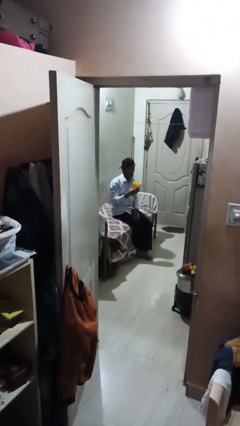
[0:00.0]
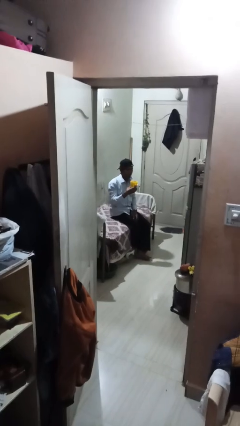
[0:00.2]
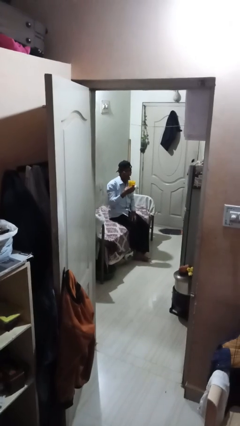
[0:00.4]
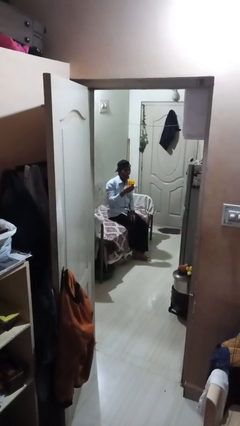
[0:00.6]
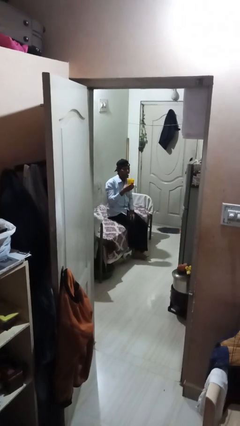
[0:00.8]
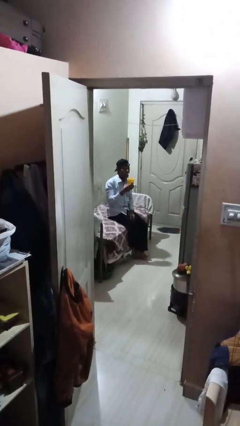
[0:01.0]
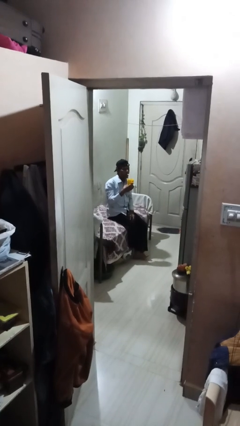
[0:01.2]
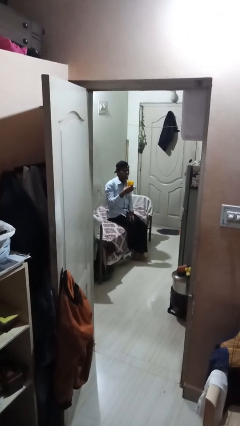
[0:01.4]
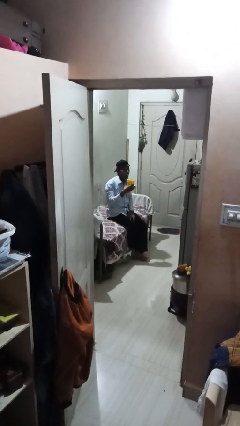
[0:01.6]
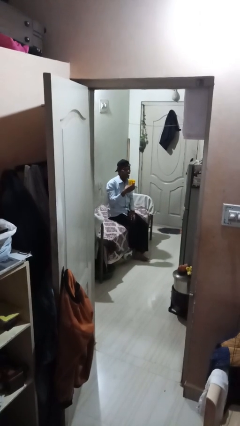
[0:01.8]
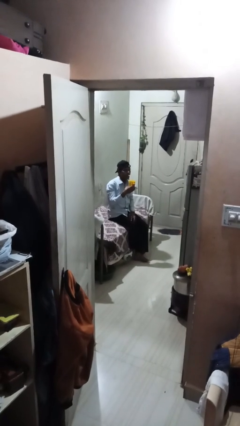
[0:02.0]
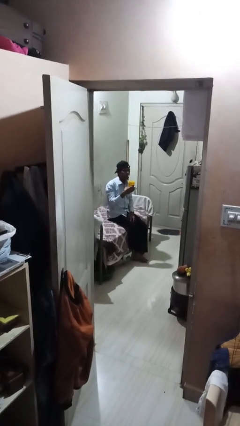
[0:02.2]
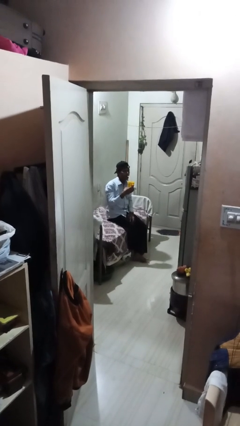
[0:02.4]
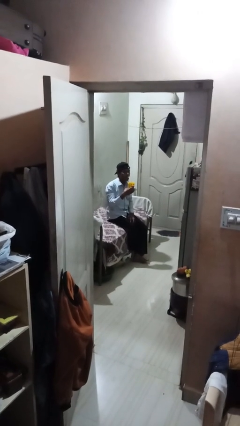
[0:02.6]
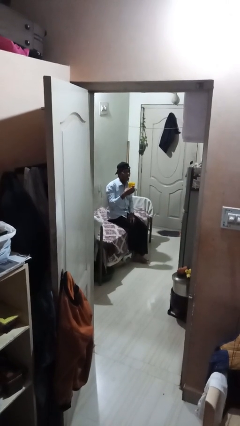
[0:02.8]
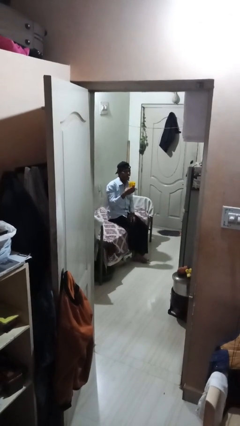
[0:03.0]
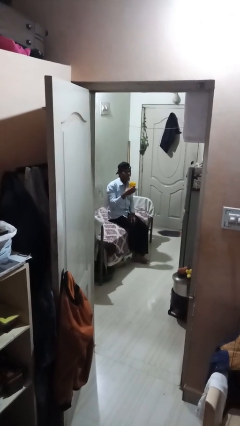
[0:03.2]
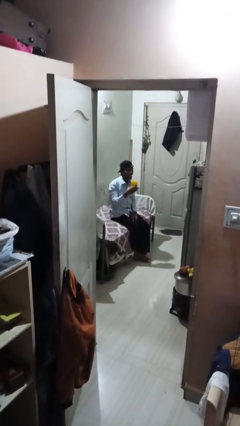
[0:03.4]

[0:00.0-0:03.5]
person drinks from straw

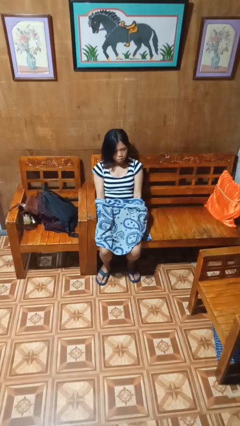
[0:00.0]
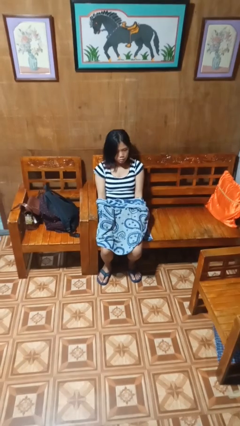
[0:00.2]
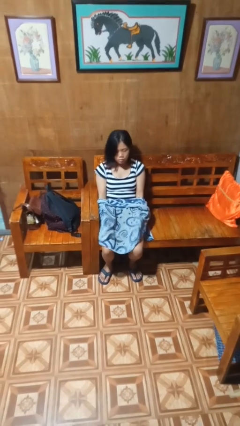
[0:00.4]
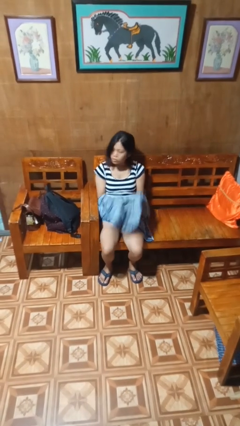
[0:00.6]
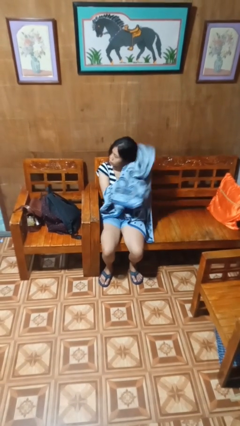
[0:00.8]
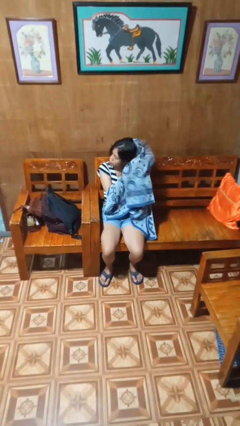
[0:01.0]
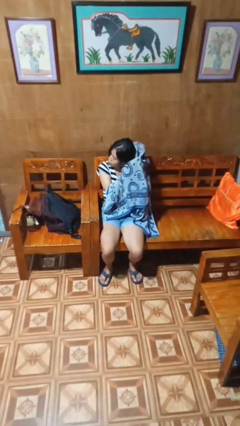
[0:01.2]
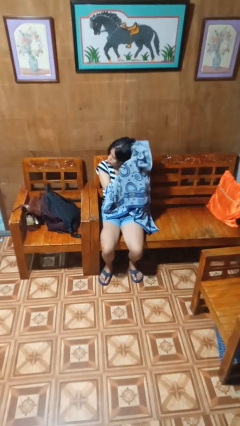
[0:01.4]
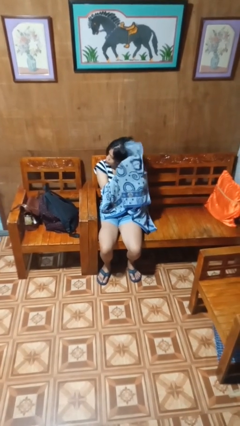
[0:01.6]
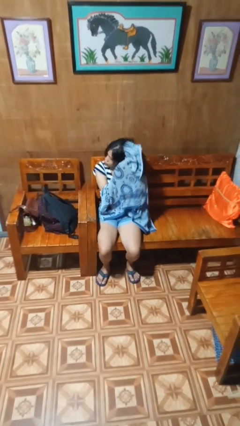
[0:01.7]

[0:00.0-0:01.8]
person dries hair with towel

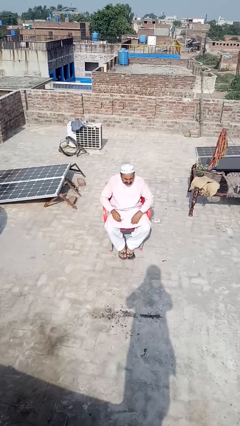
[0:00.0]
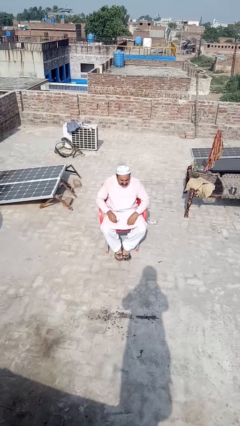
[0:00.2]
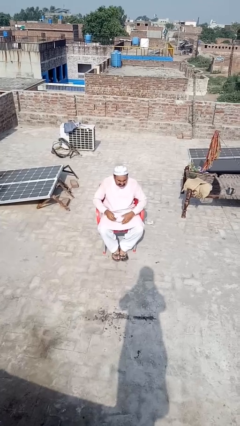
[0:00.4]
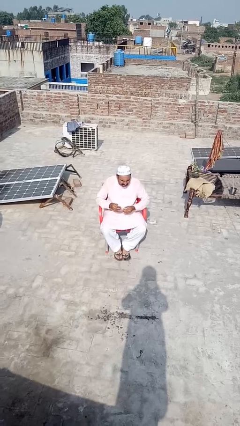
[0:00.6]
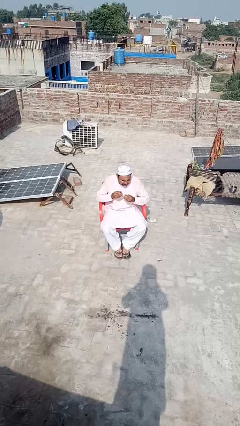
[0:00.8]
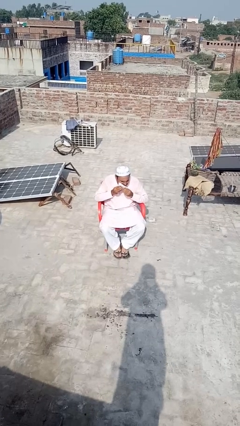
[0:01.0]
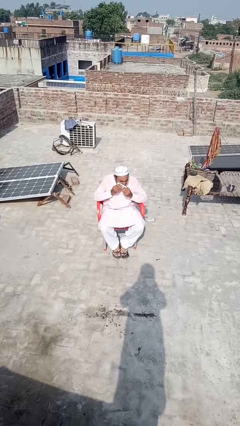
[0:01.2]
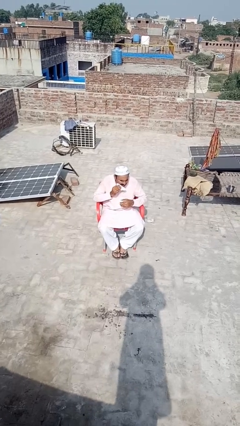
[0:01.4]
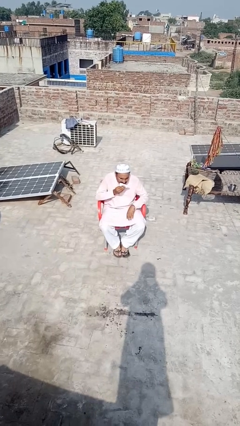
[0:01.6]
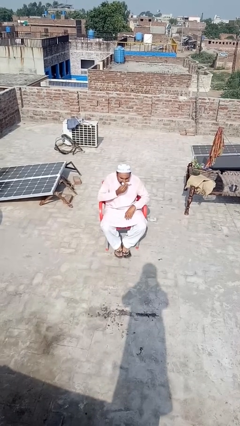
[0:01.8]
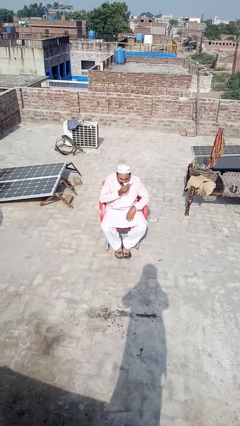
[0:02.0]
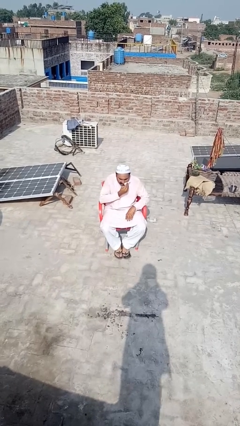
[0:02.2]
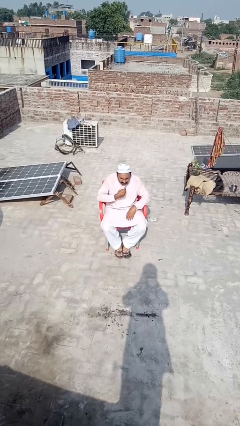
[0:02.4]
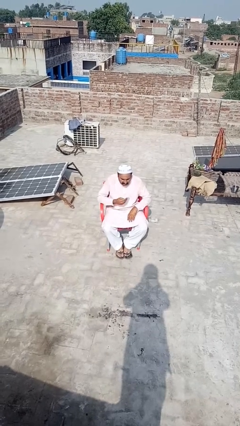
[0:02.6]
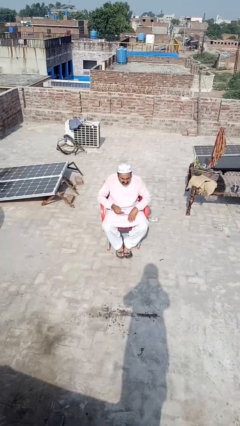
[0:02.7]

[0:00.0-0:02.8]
person wipes mouth with napkin

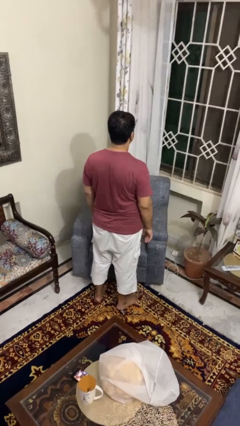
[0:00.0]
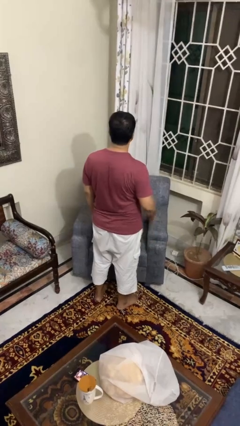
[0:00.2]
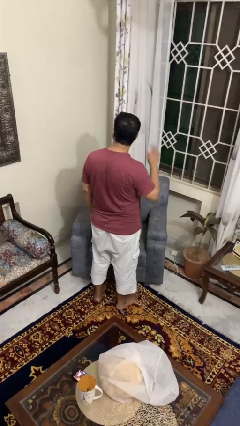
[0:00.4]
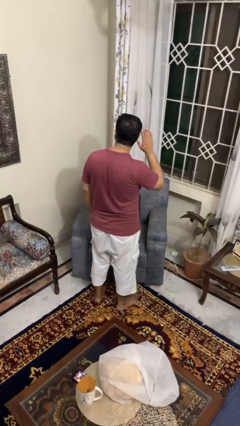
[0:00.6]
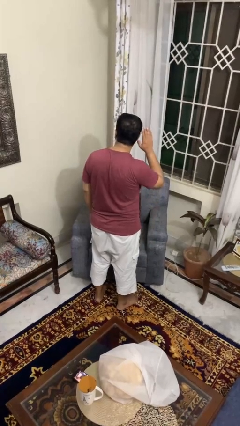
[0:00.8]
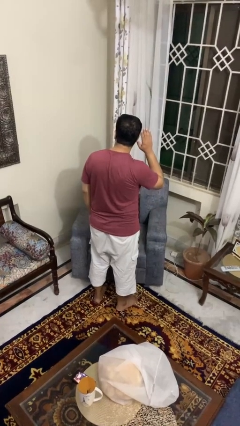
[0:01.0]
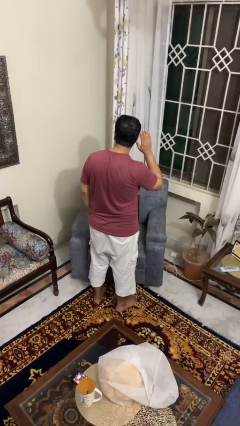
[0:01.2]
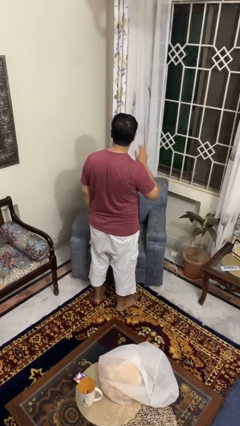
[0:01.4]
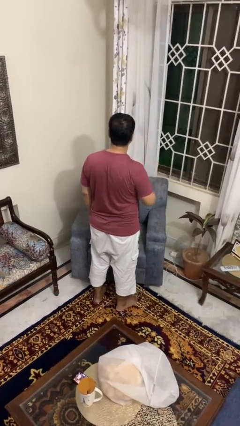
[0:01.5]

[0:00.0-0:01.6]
person gestures listen closely

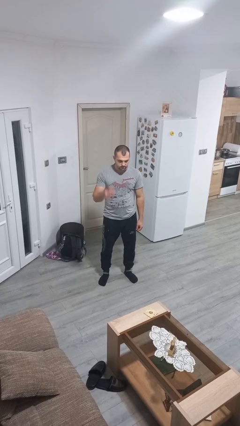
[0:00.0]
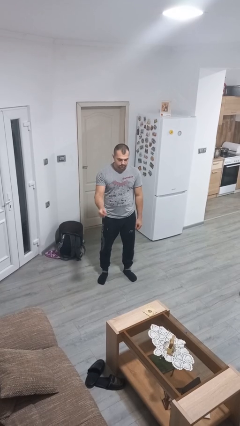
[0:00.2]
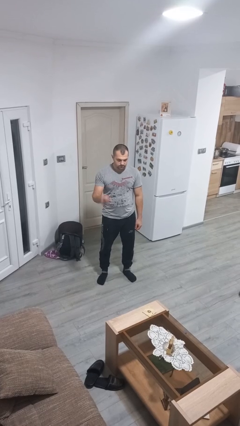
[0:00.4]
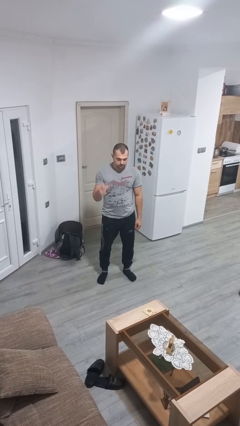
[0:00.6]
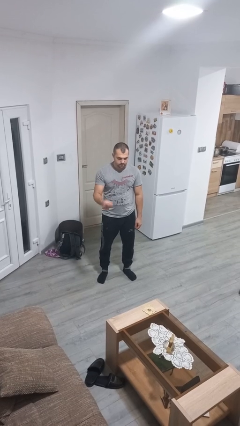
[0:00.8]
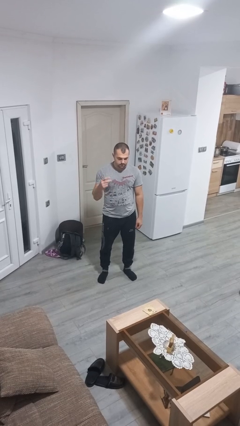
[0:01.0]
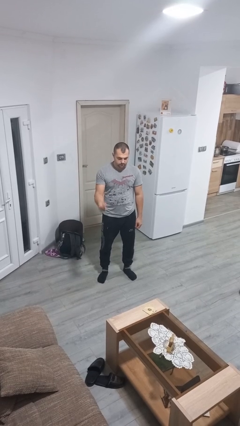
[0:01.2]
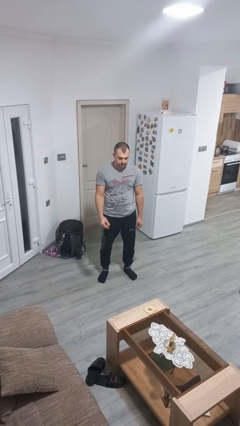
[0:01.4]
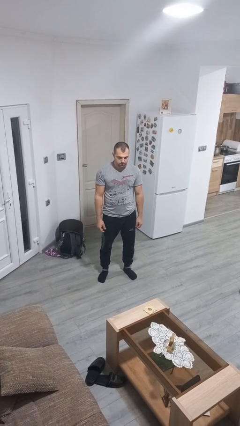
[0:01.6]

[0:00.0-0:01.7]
person snaps fingers

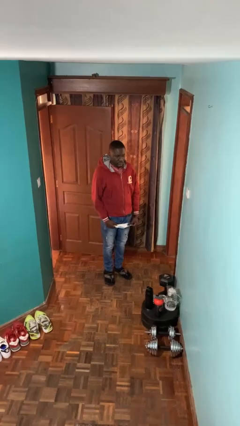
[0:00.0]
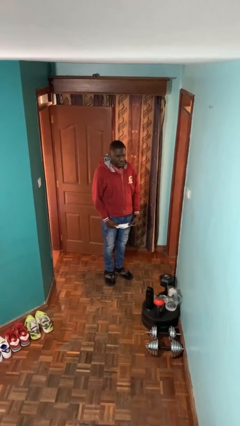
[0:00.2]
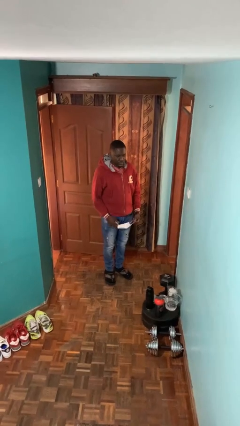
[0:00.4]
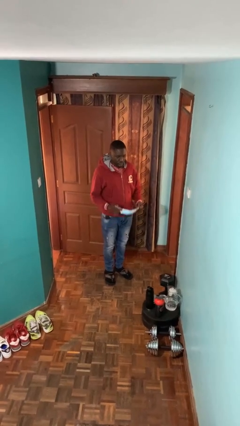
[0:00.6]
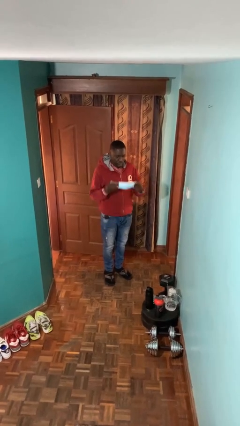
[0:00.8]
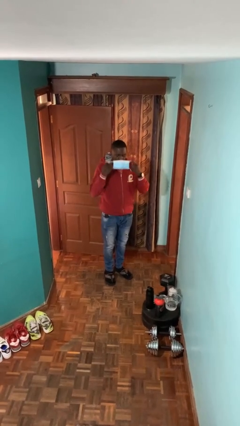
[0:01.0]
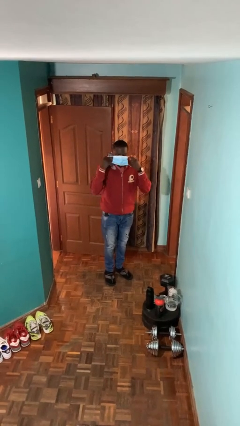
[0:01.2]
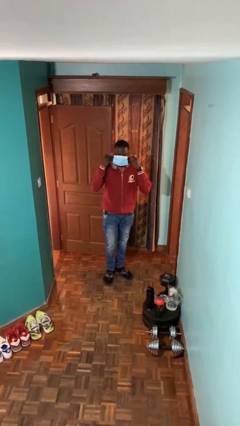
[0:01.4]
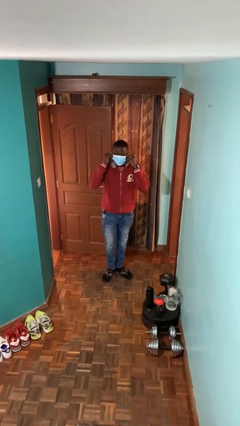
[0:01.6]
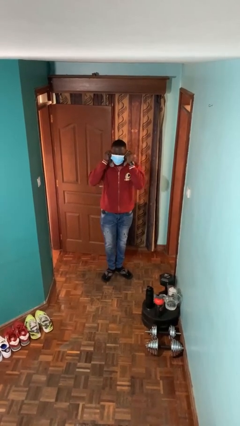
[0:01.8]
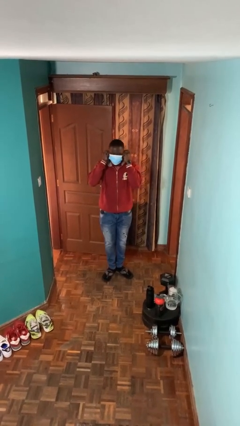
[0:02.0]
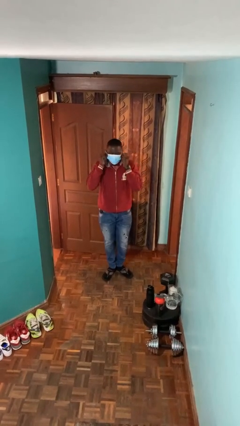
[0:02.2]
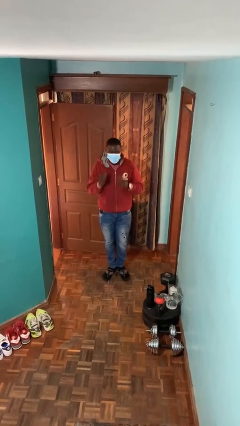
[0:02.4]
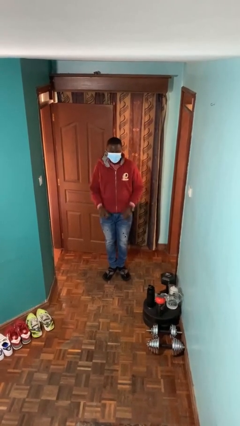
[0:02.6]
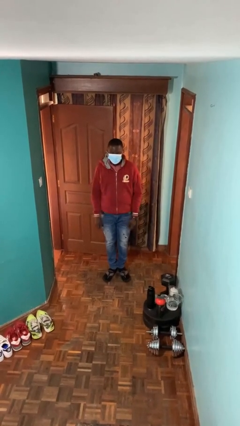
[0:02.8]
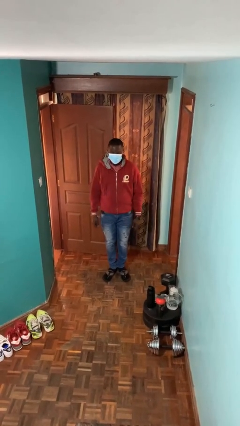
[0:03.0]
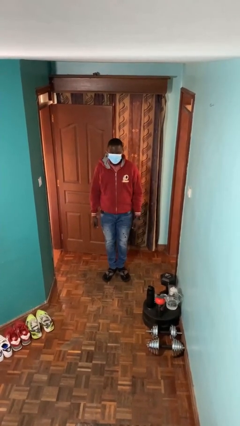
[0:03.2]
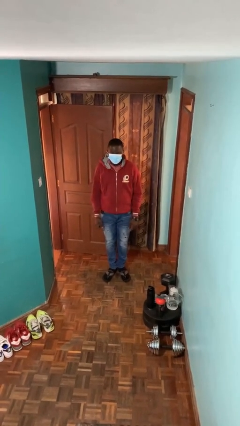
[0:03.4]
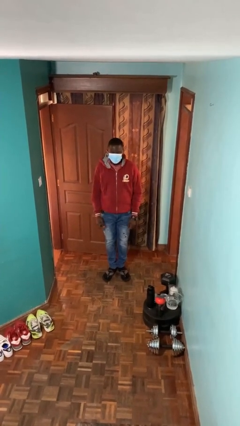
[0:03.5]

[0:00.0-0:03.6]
person puts on facemask

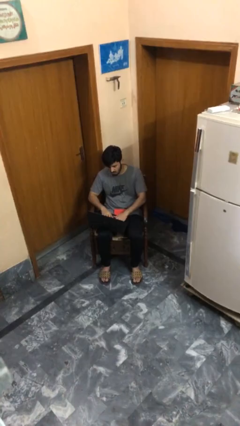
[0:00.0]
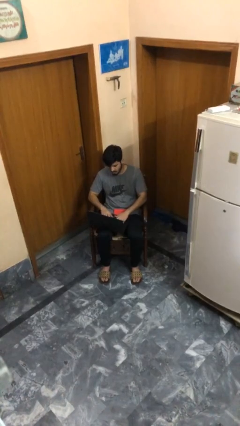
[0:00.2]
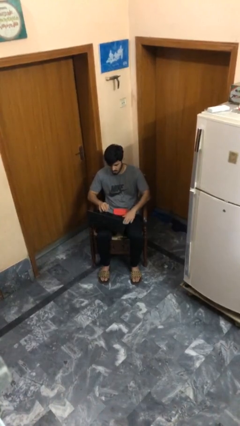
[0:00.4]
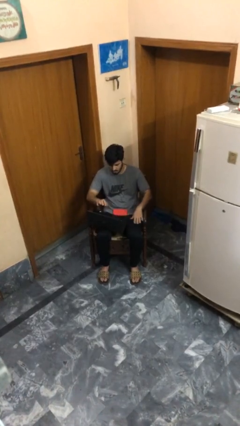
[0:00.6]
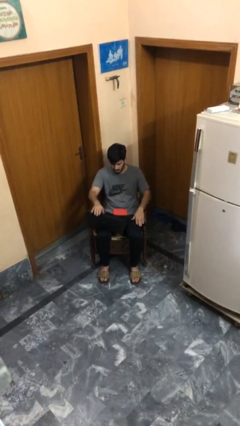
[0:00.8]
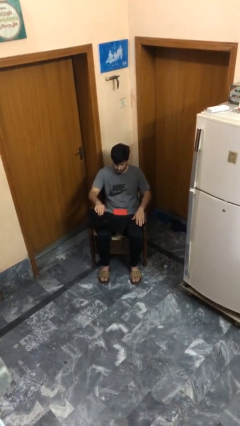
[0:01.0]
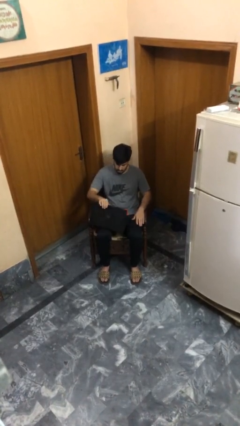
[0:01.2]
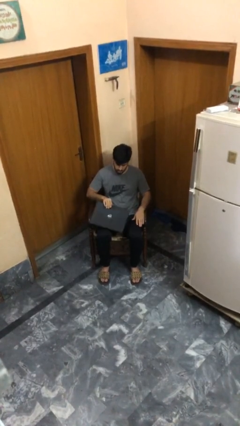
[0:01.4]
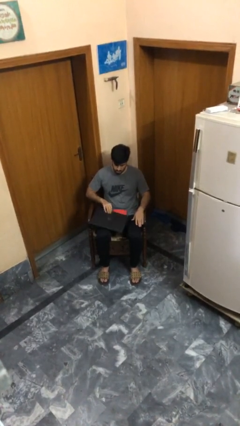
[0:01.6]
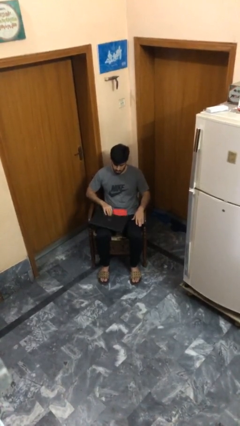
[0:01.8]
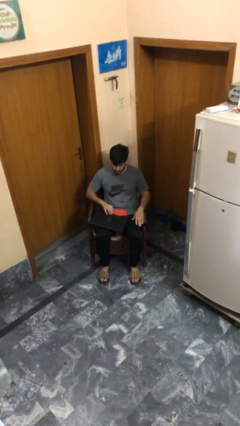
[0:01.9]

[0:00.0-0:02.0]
person closes laptop

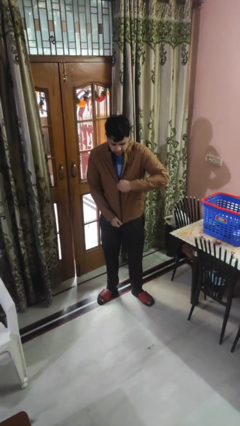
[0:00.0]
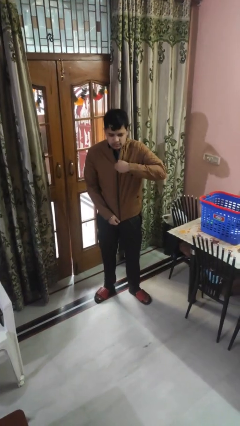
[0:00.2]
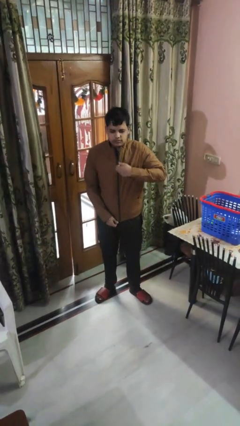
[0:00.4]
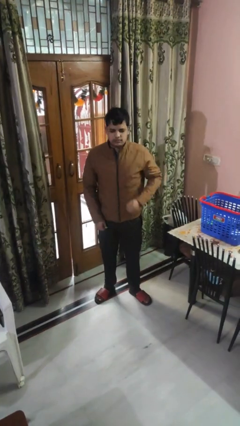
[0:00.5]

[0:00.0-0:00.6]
person zips up jacket
